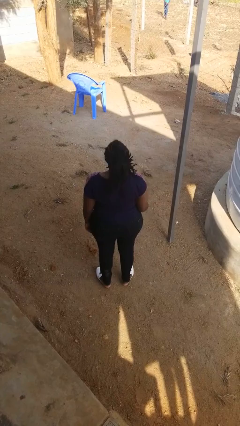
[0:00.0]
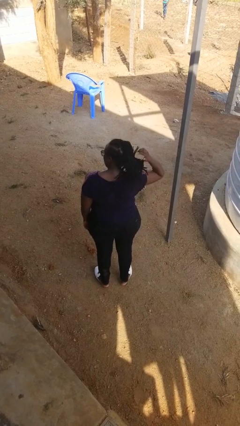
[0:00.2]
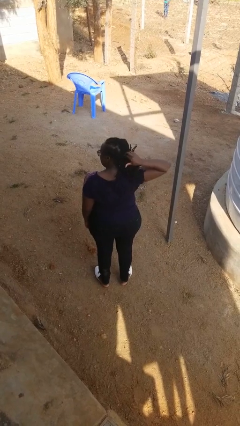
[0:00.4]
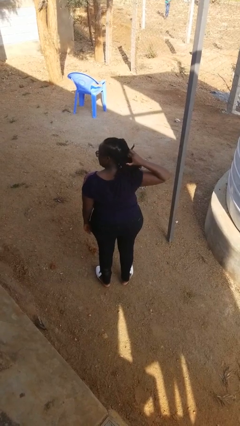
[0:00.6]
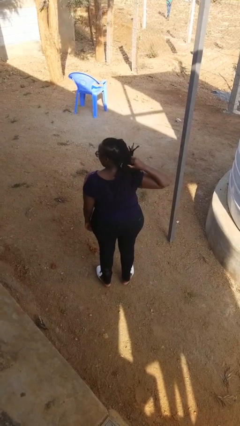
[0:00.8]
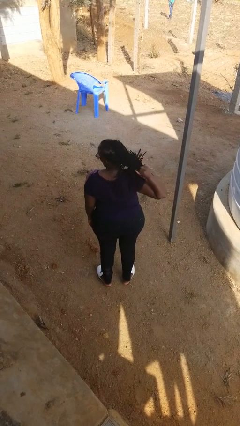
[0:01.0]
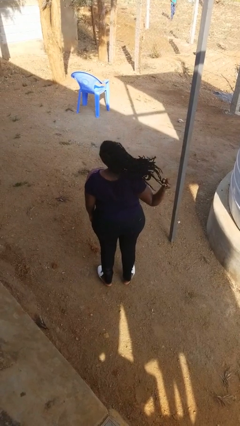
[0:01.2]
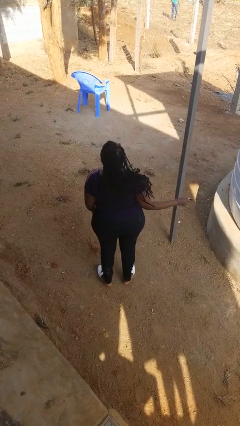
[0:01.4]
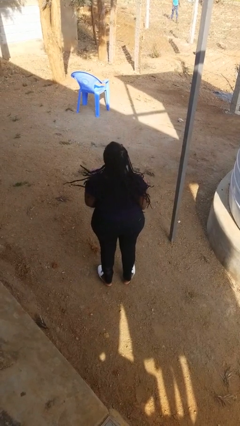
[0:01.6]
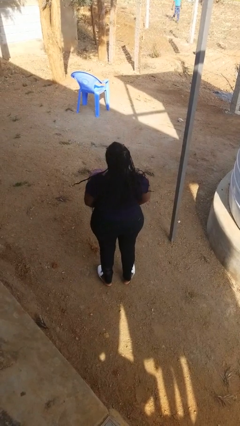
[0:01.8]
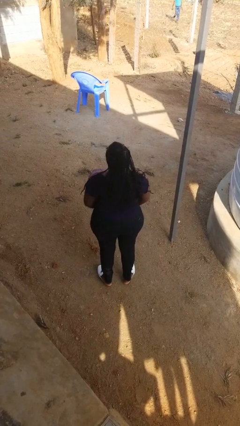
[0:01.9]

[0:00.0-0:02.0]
person takes off hairtie

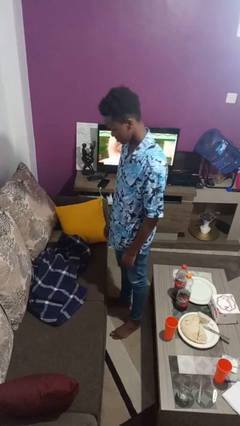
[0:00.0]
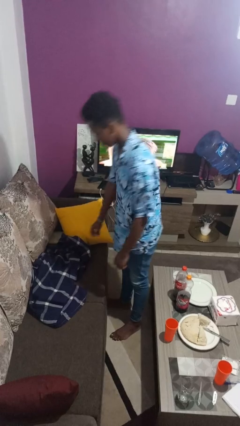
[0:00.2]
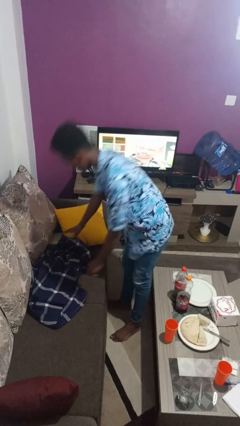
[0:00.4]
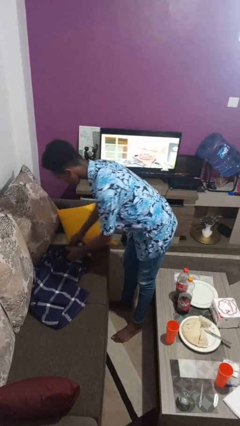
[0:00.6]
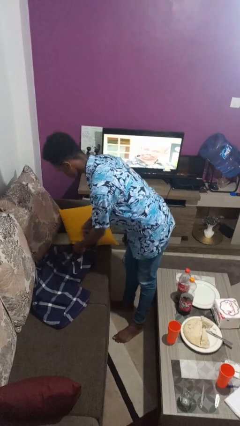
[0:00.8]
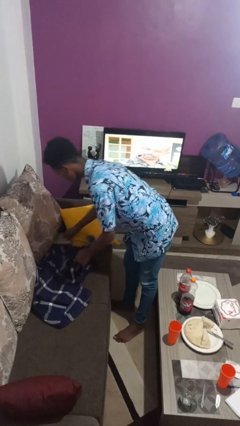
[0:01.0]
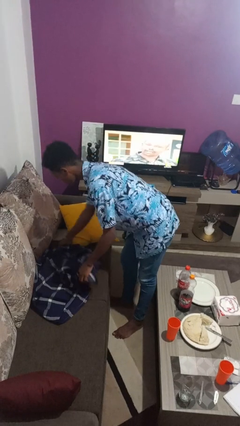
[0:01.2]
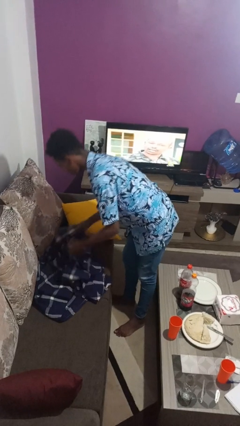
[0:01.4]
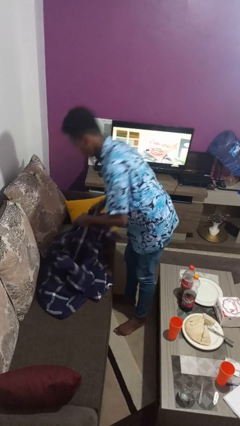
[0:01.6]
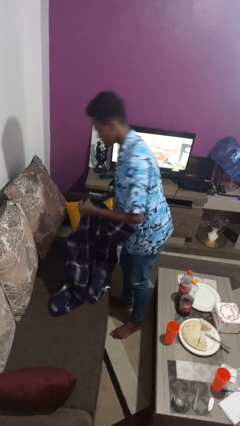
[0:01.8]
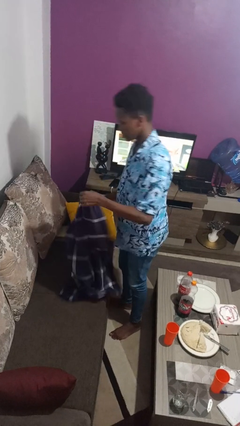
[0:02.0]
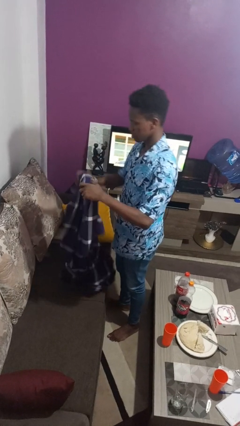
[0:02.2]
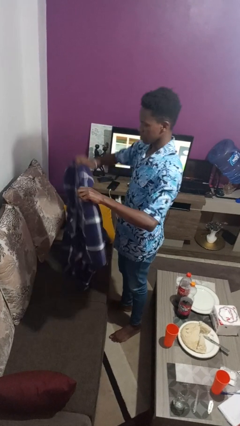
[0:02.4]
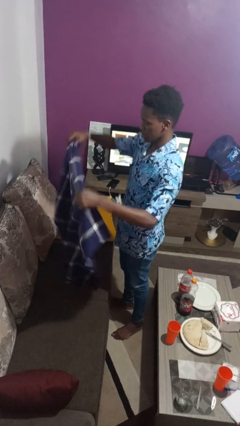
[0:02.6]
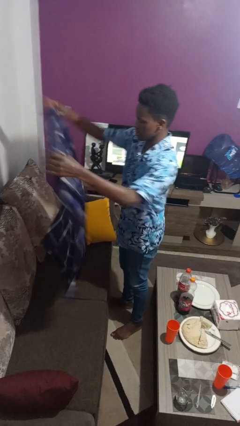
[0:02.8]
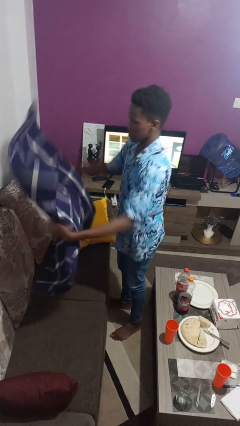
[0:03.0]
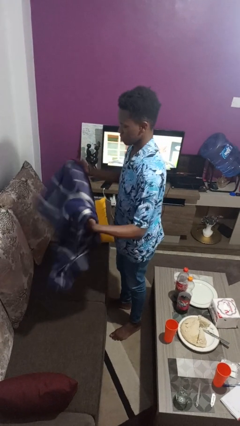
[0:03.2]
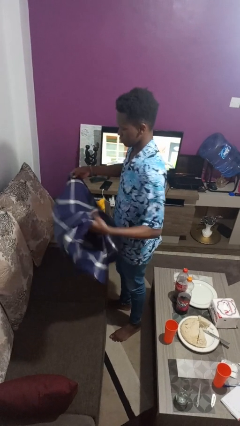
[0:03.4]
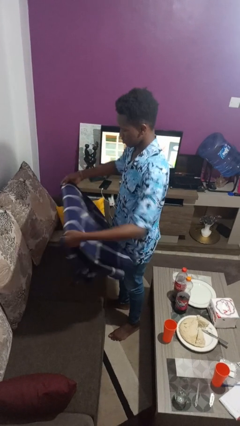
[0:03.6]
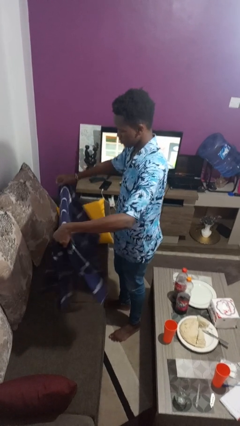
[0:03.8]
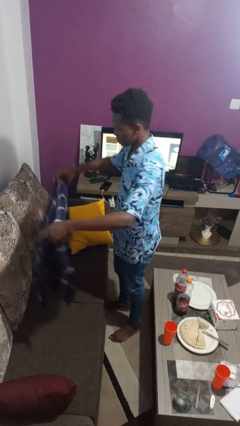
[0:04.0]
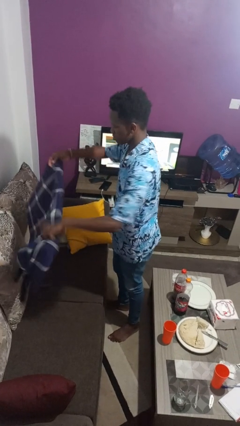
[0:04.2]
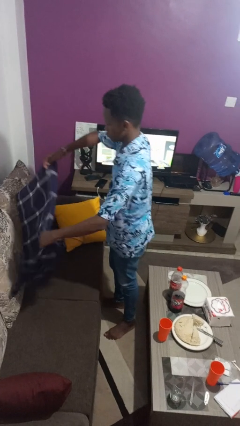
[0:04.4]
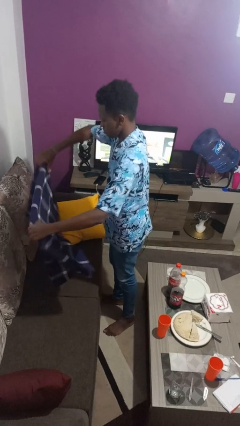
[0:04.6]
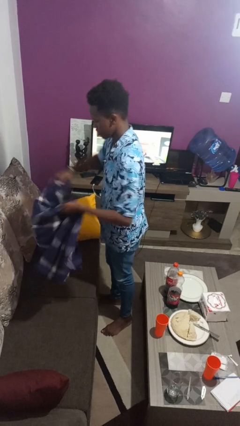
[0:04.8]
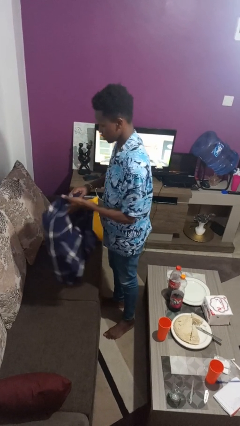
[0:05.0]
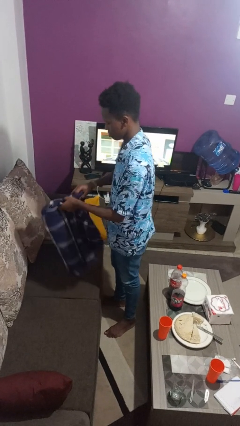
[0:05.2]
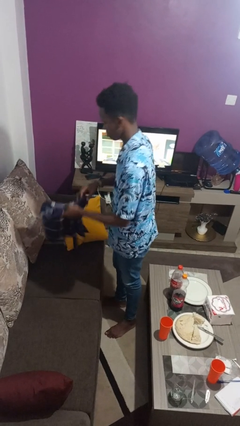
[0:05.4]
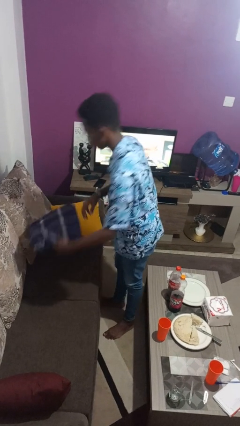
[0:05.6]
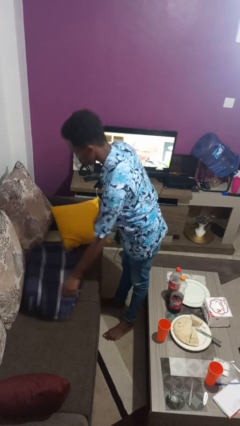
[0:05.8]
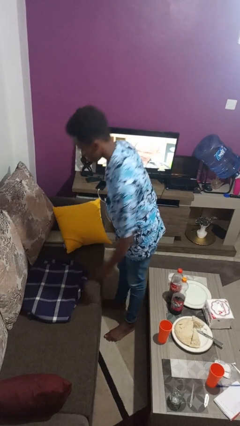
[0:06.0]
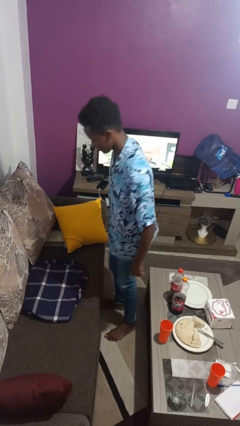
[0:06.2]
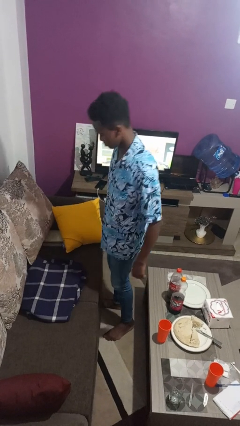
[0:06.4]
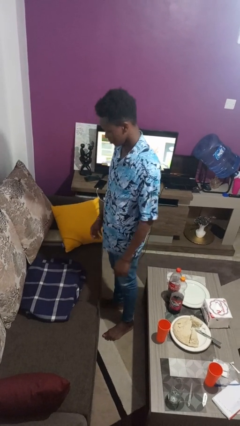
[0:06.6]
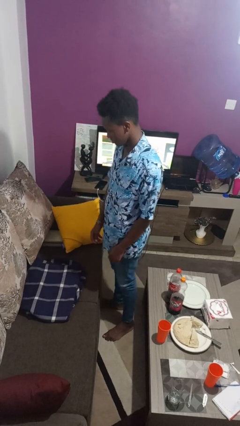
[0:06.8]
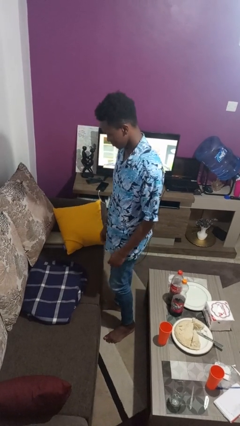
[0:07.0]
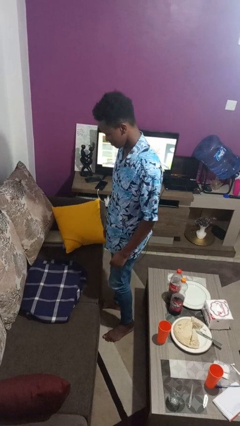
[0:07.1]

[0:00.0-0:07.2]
person folds blanket

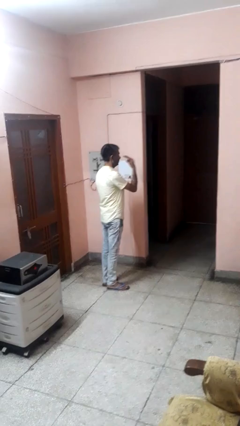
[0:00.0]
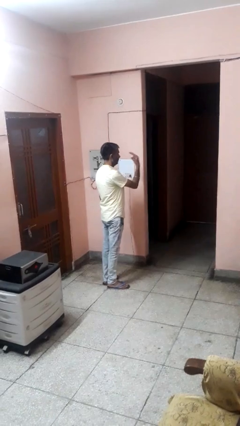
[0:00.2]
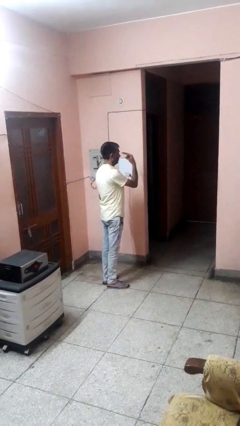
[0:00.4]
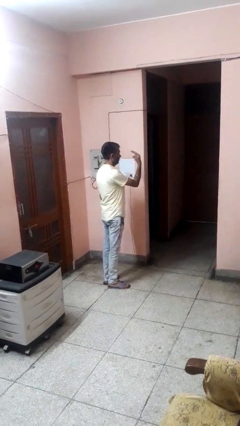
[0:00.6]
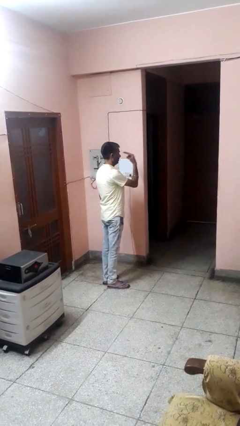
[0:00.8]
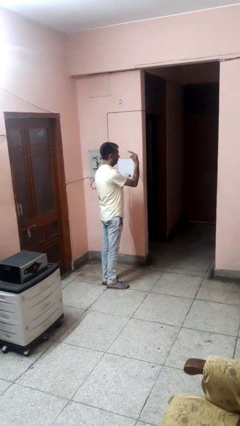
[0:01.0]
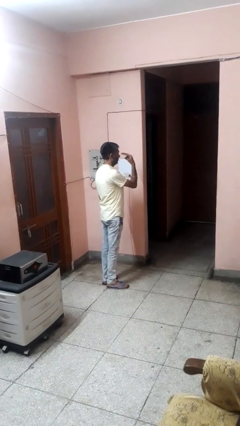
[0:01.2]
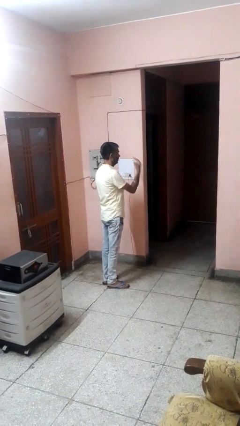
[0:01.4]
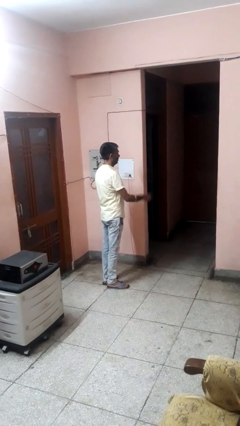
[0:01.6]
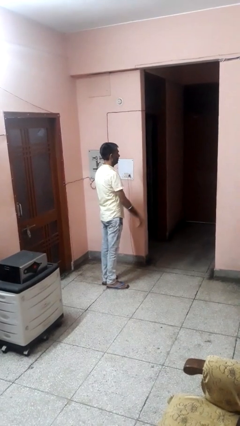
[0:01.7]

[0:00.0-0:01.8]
person gestures watch closely

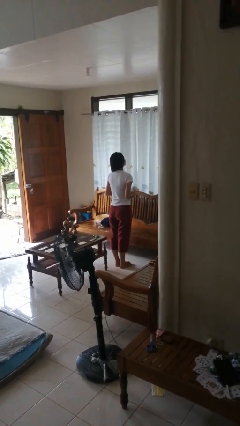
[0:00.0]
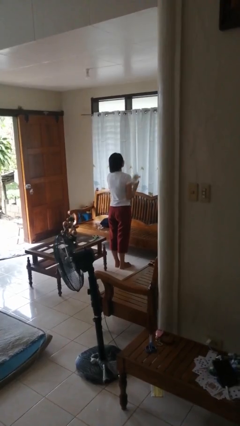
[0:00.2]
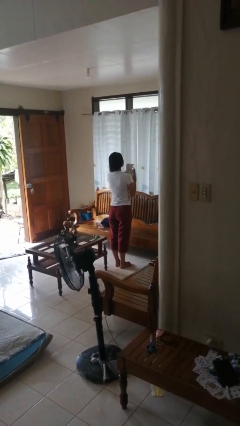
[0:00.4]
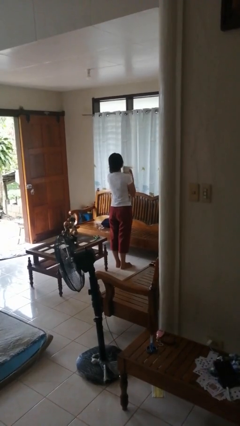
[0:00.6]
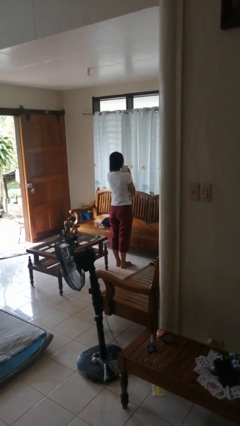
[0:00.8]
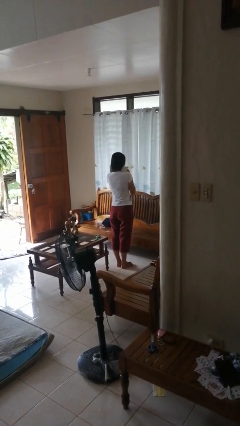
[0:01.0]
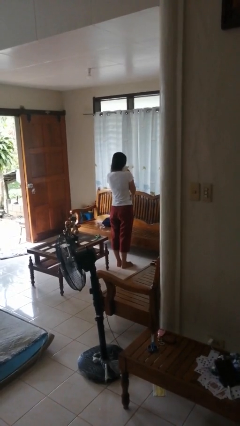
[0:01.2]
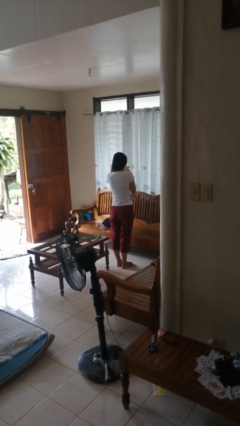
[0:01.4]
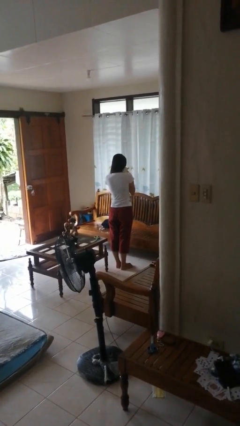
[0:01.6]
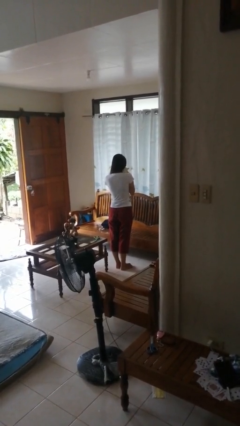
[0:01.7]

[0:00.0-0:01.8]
person hugs stuffed animal

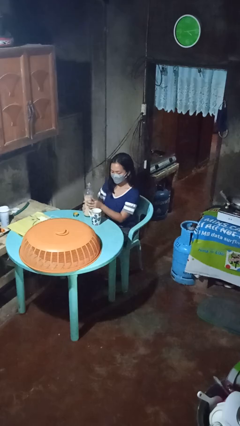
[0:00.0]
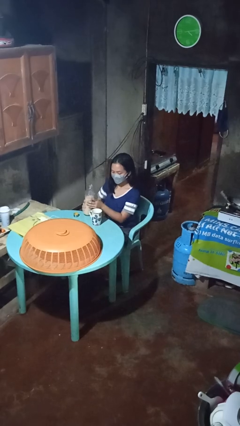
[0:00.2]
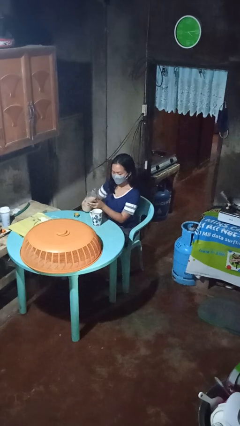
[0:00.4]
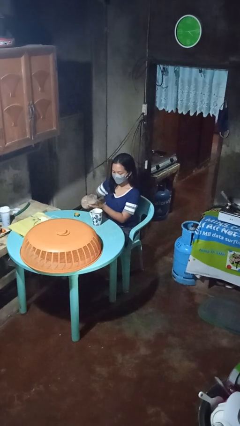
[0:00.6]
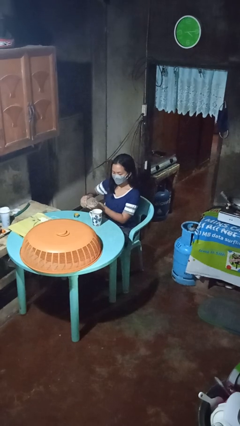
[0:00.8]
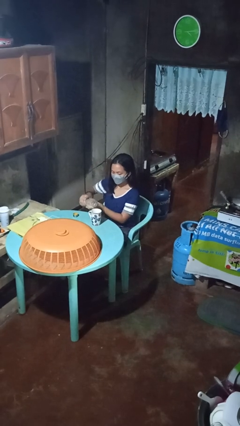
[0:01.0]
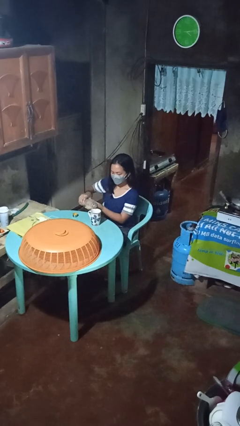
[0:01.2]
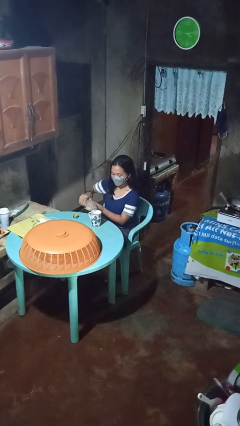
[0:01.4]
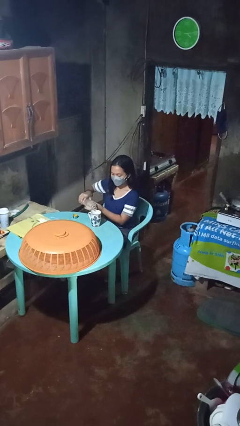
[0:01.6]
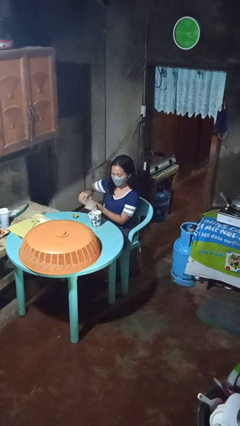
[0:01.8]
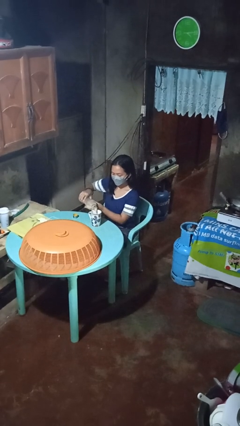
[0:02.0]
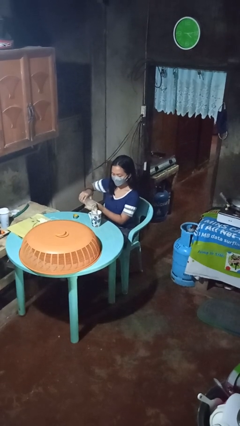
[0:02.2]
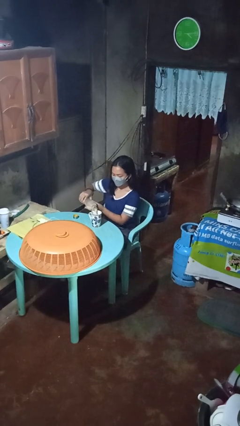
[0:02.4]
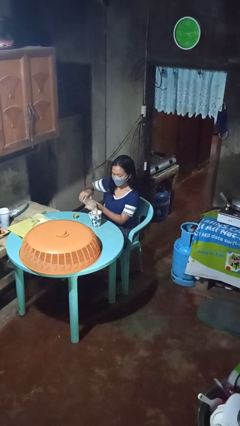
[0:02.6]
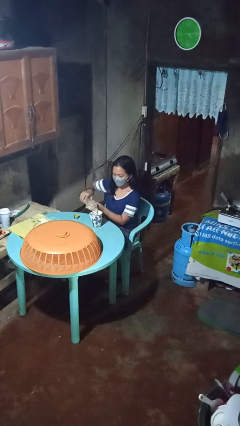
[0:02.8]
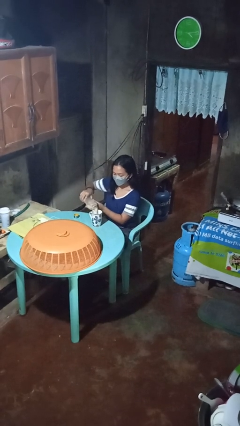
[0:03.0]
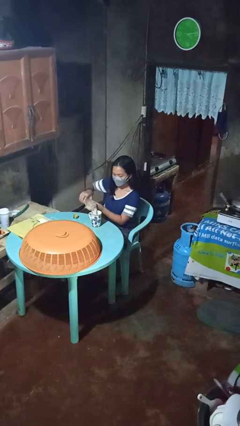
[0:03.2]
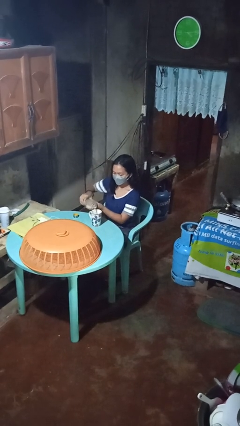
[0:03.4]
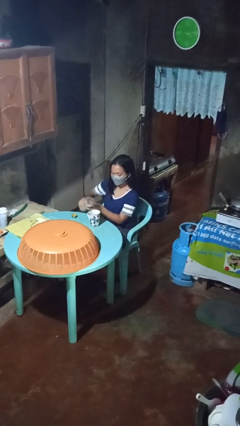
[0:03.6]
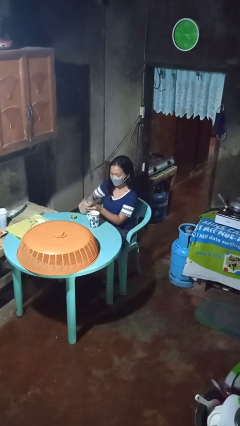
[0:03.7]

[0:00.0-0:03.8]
person pours coffee into mug

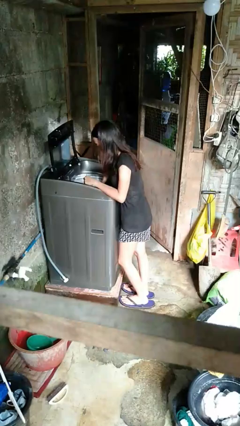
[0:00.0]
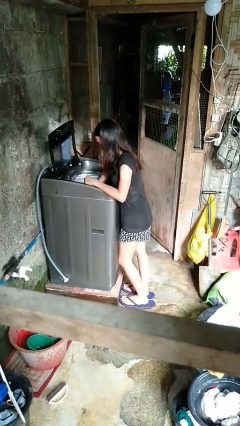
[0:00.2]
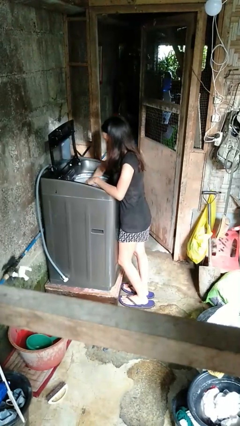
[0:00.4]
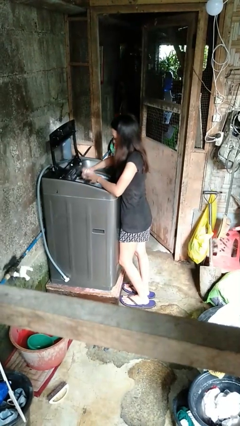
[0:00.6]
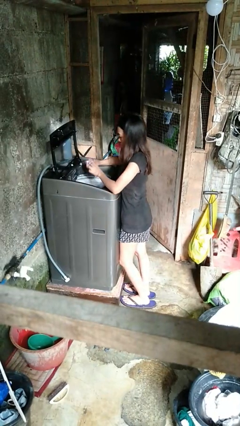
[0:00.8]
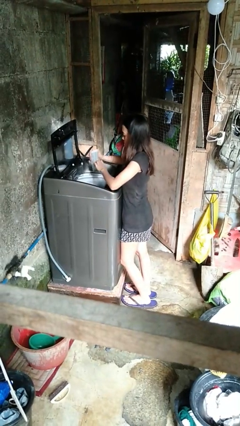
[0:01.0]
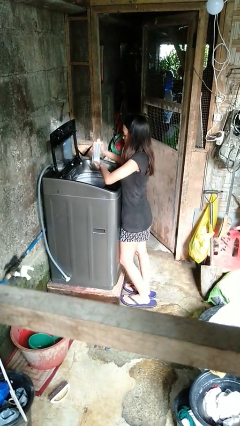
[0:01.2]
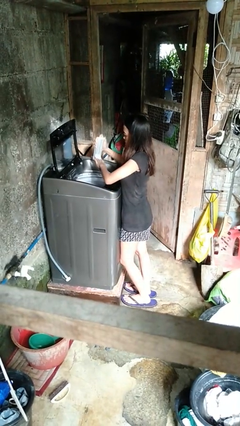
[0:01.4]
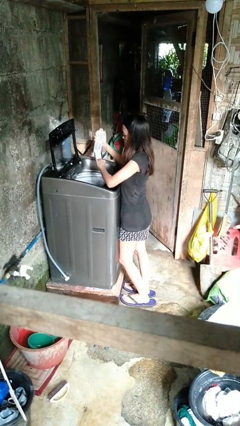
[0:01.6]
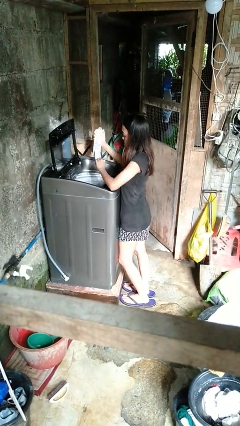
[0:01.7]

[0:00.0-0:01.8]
person cleans dryer lint trap
